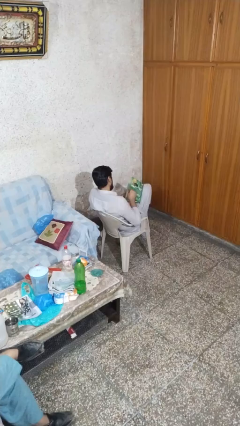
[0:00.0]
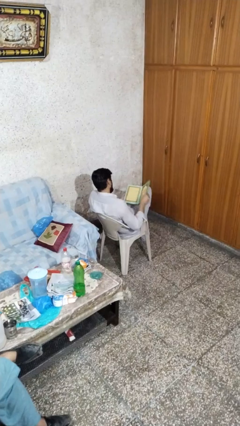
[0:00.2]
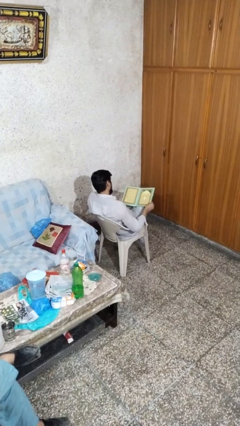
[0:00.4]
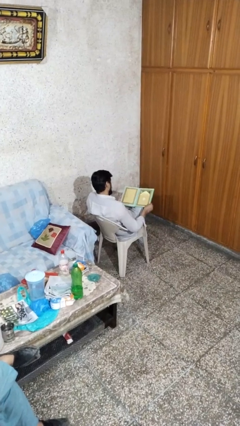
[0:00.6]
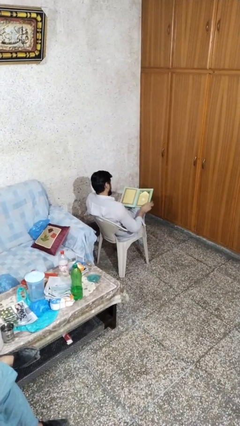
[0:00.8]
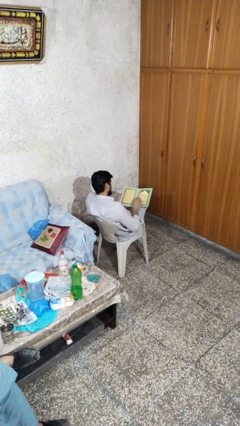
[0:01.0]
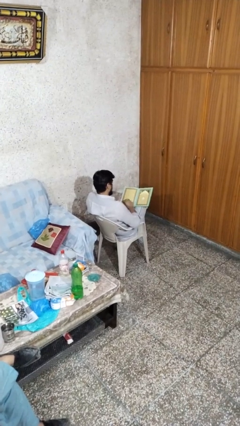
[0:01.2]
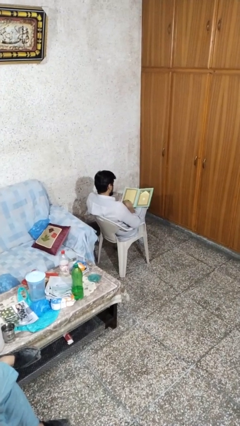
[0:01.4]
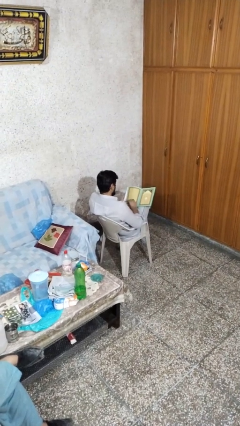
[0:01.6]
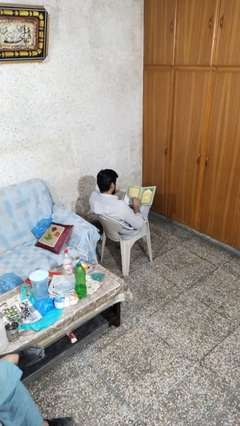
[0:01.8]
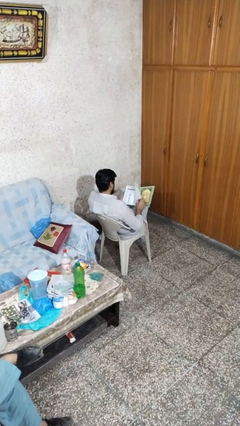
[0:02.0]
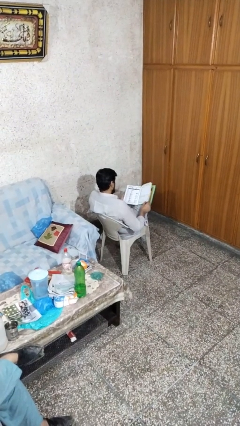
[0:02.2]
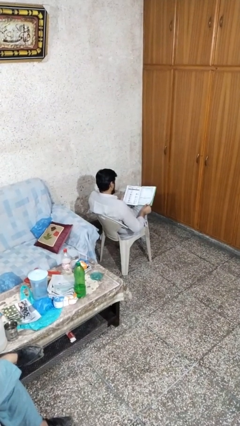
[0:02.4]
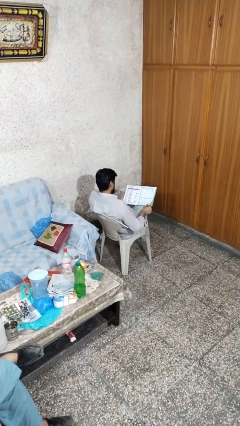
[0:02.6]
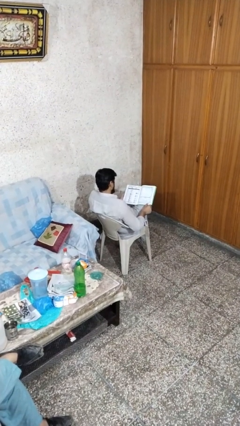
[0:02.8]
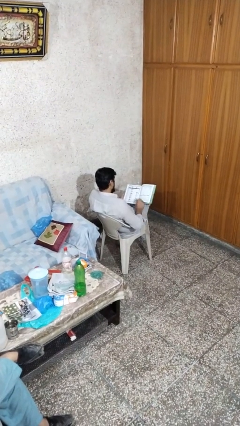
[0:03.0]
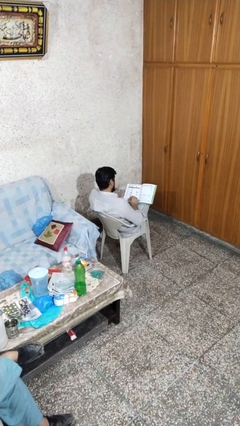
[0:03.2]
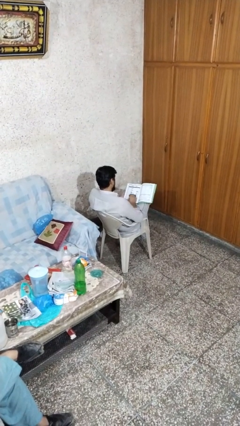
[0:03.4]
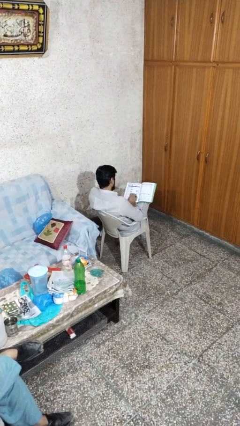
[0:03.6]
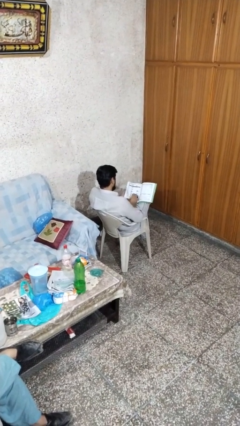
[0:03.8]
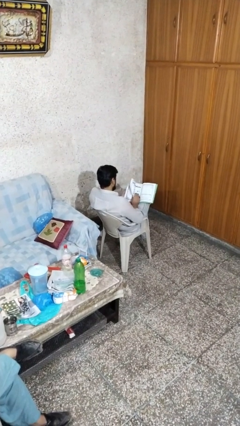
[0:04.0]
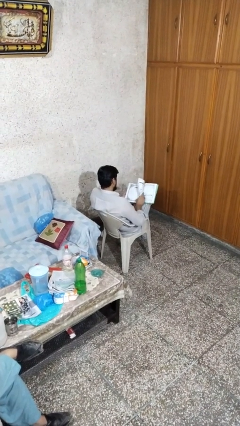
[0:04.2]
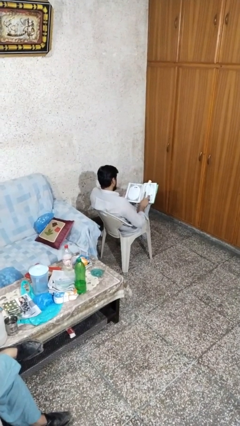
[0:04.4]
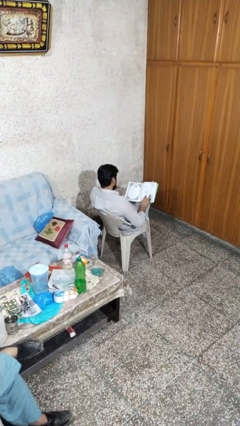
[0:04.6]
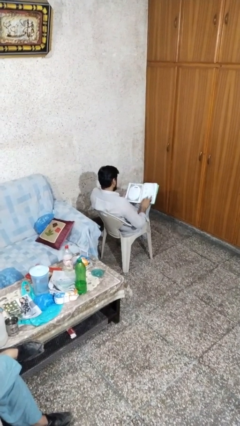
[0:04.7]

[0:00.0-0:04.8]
person reads book

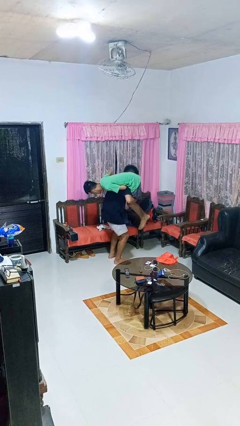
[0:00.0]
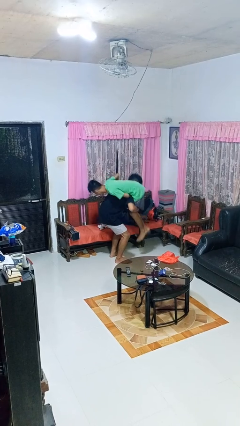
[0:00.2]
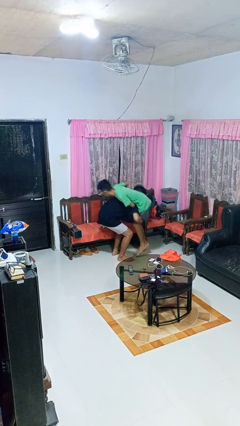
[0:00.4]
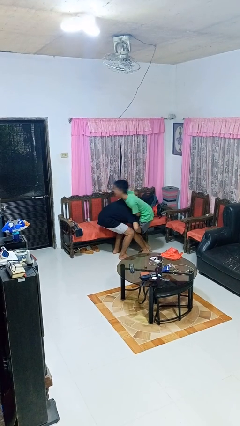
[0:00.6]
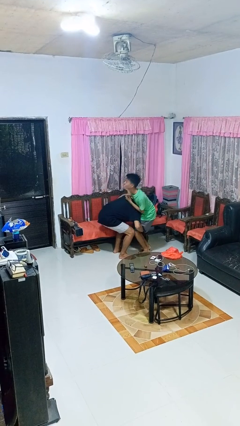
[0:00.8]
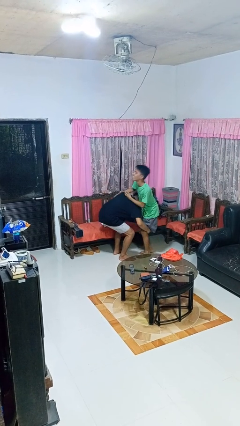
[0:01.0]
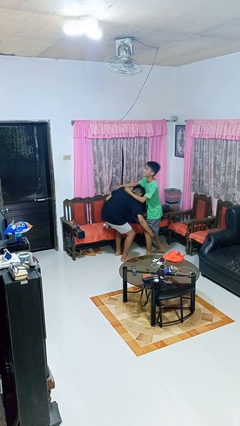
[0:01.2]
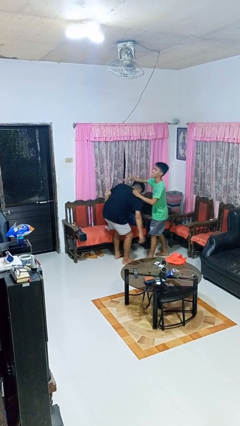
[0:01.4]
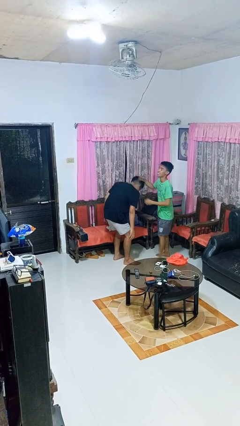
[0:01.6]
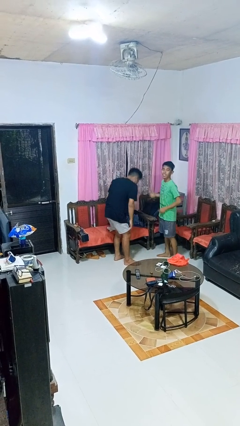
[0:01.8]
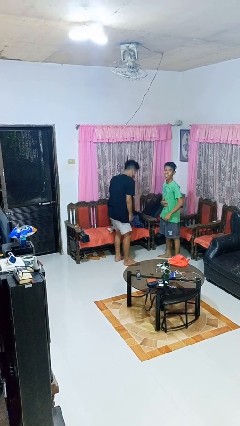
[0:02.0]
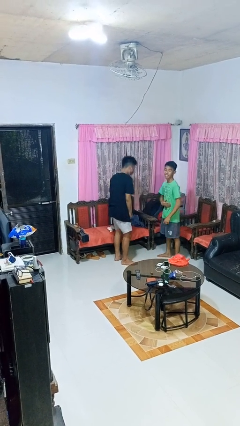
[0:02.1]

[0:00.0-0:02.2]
person puts down person

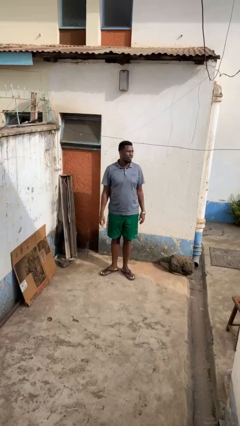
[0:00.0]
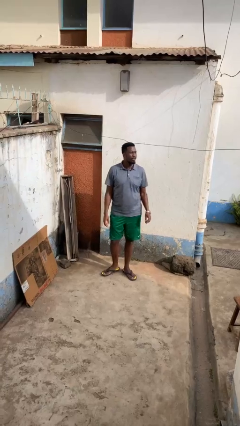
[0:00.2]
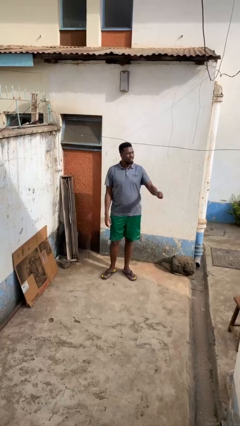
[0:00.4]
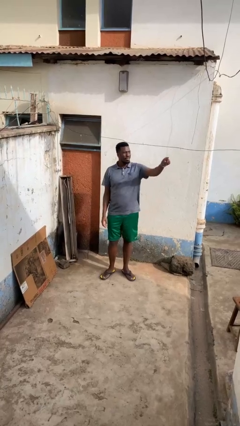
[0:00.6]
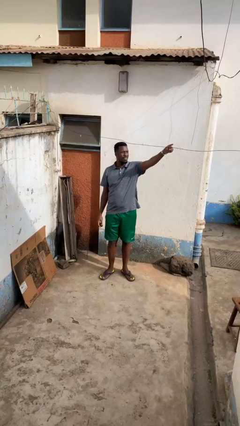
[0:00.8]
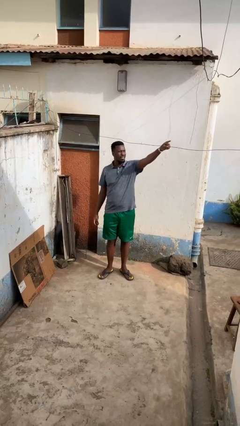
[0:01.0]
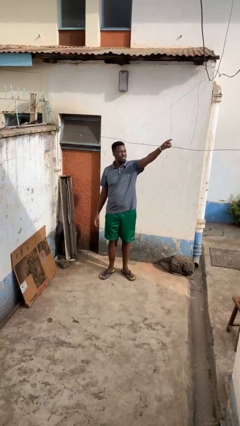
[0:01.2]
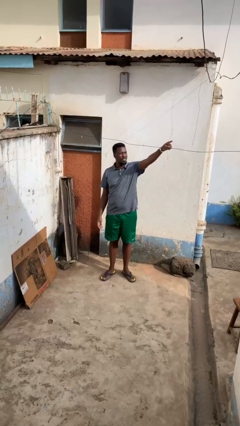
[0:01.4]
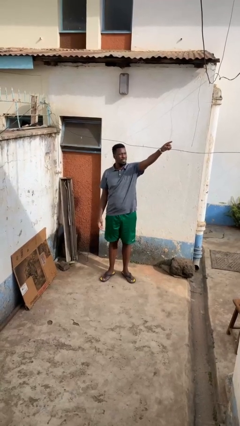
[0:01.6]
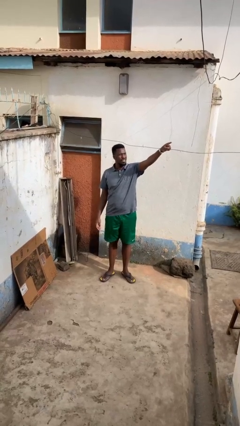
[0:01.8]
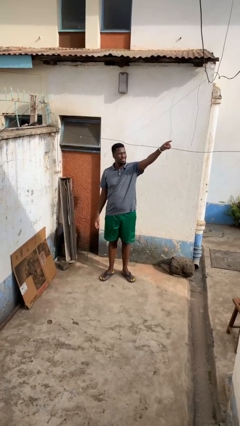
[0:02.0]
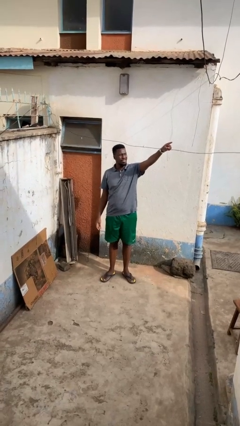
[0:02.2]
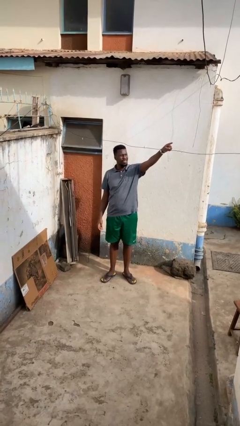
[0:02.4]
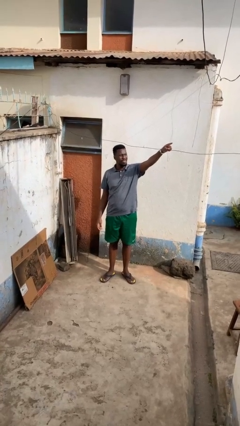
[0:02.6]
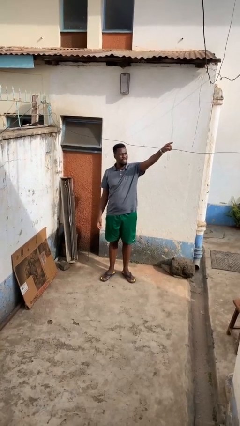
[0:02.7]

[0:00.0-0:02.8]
person points at person

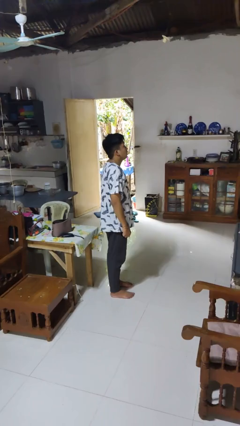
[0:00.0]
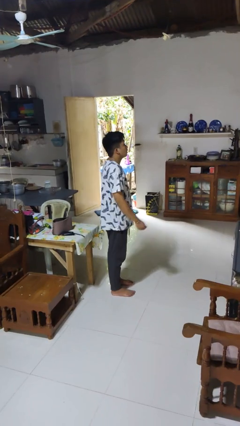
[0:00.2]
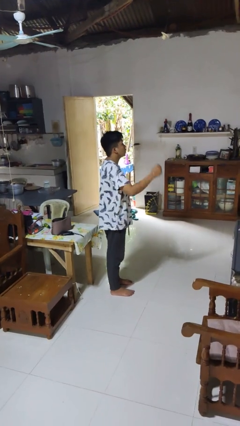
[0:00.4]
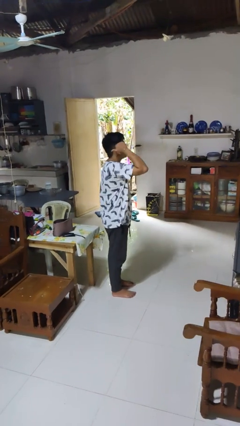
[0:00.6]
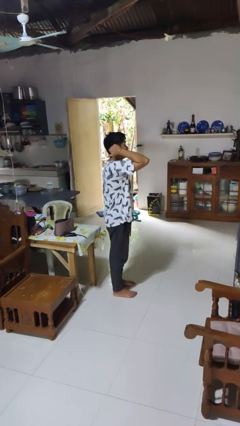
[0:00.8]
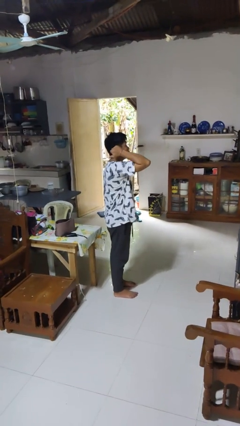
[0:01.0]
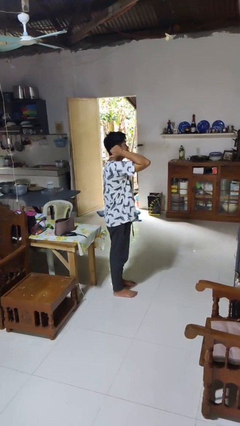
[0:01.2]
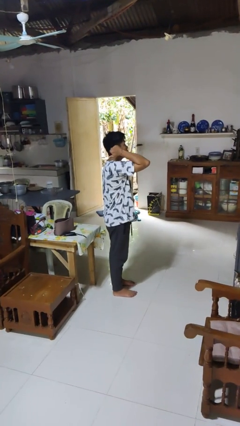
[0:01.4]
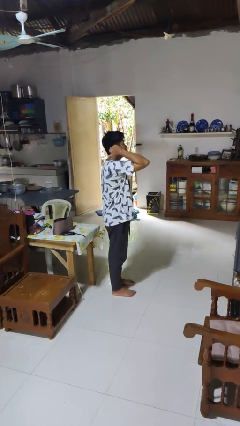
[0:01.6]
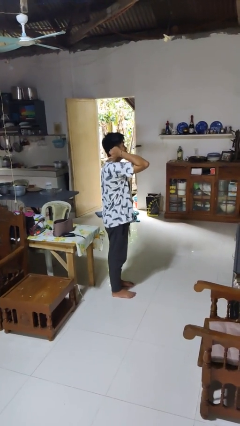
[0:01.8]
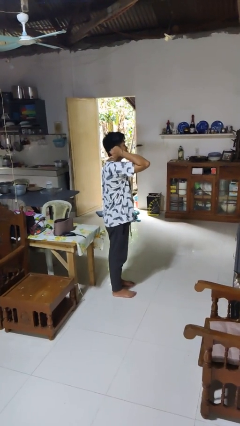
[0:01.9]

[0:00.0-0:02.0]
person gestures behind me

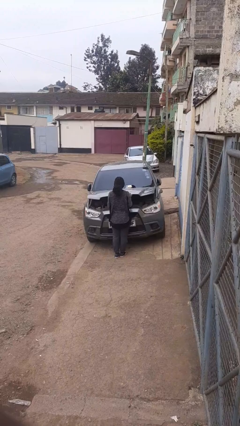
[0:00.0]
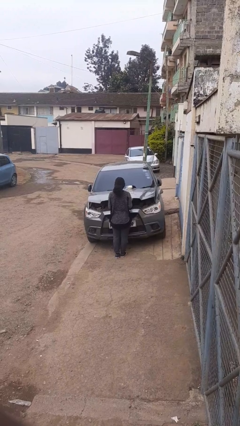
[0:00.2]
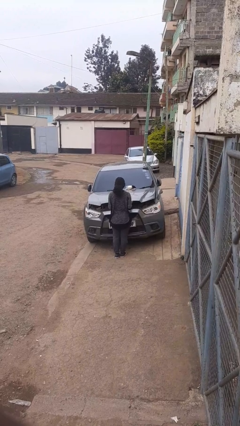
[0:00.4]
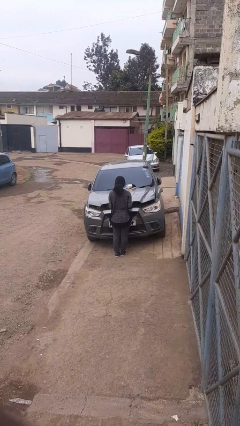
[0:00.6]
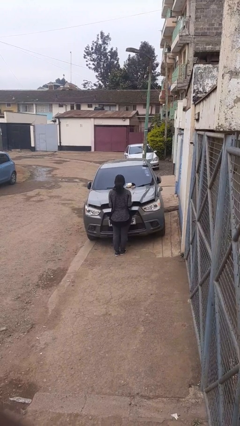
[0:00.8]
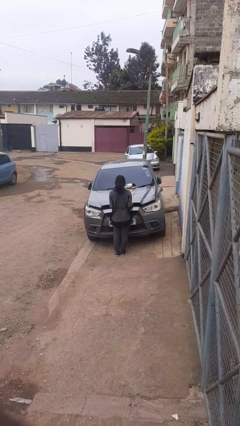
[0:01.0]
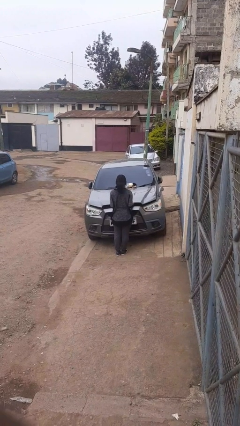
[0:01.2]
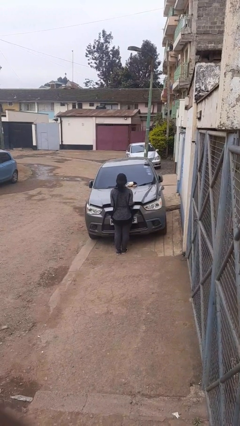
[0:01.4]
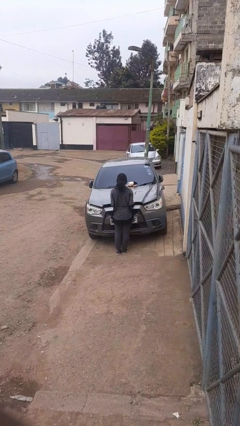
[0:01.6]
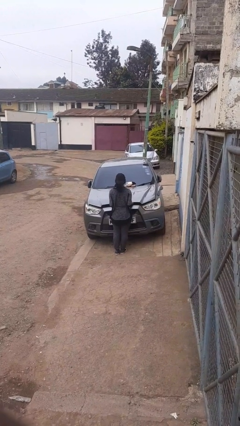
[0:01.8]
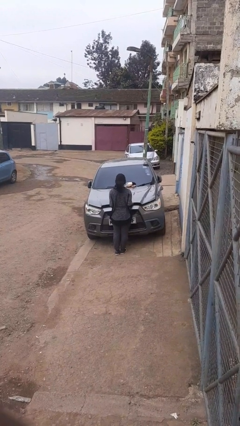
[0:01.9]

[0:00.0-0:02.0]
person closes car hood

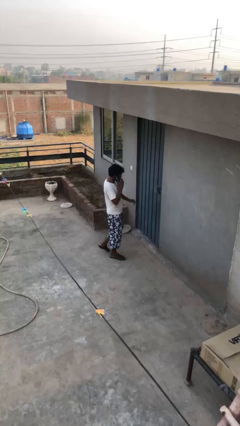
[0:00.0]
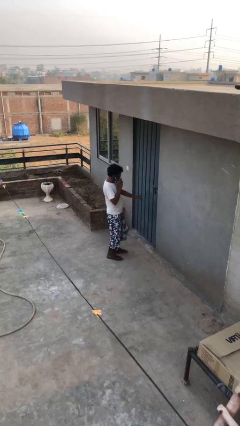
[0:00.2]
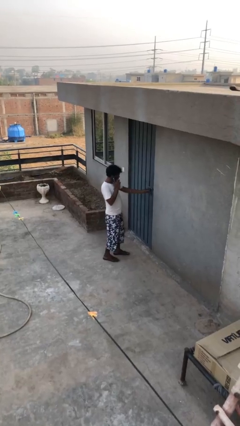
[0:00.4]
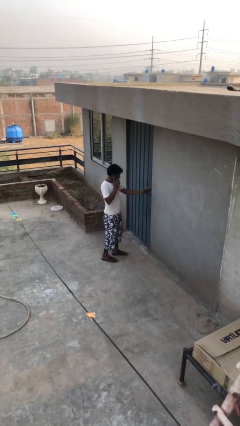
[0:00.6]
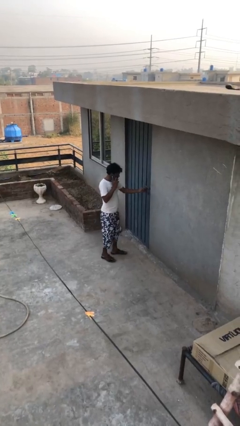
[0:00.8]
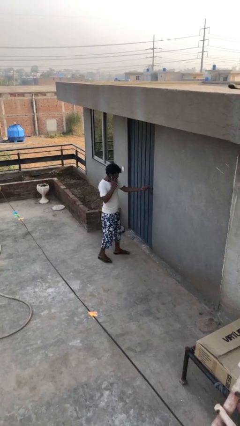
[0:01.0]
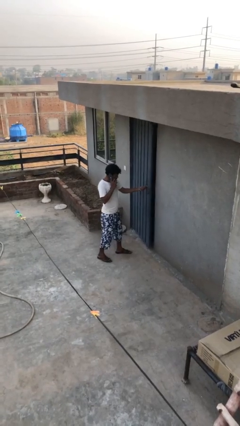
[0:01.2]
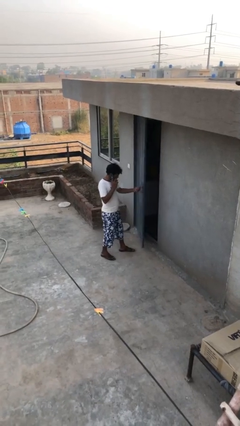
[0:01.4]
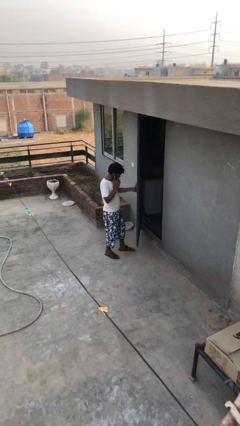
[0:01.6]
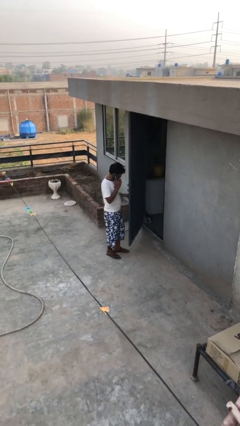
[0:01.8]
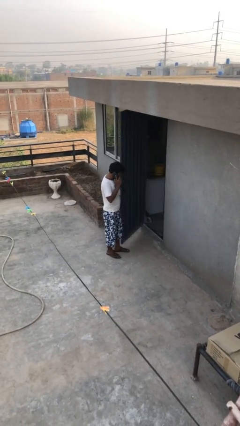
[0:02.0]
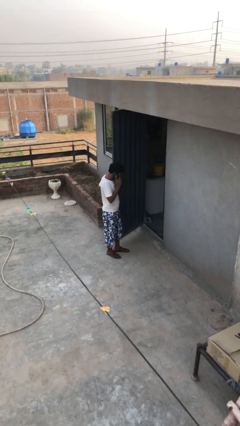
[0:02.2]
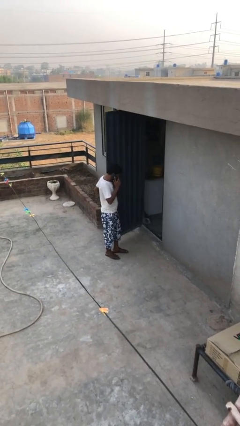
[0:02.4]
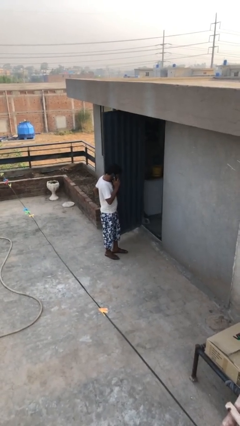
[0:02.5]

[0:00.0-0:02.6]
person opens facility door

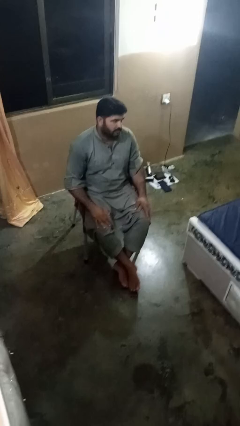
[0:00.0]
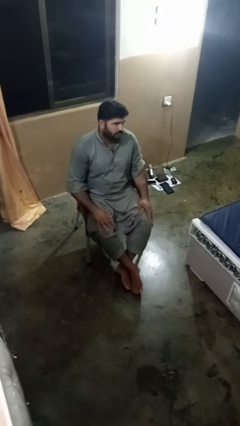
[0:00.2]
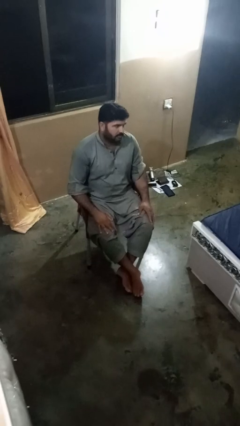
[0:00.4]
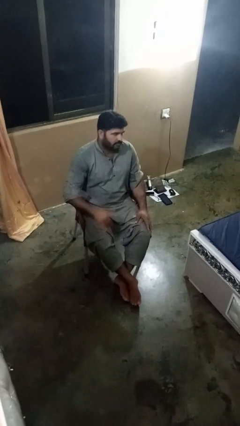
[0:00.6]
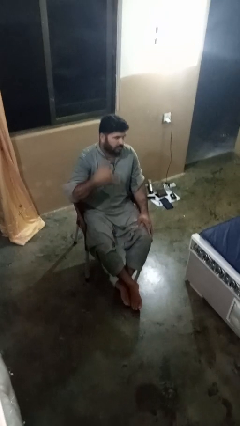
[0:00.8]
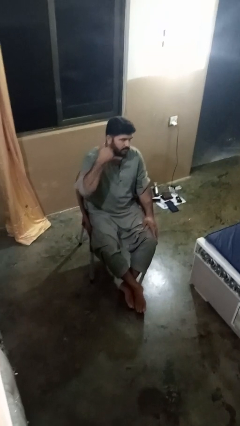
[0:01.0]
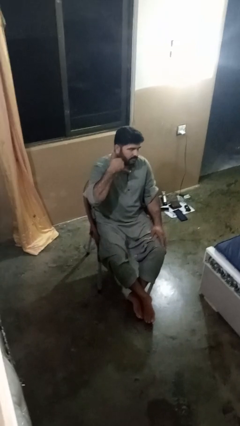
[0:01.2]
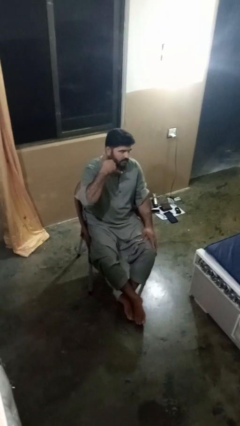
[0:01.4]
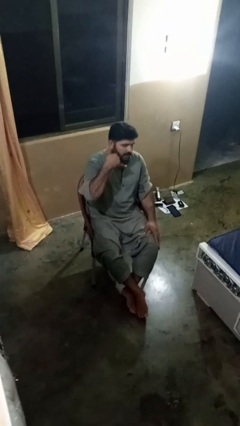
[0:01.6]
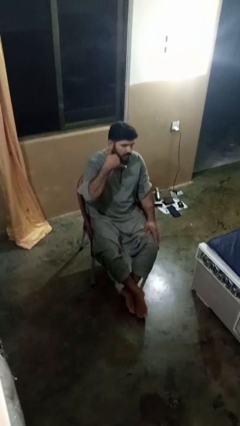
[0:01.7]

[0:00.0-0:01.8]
person gestures call me
